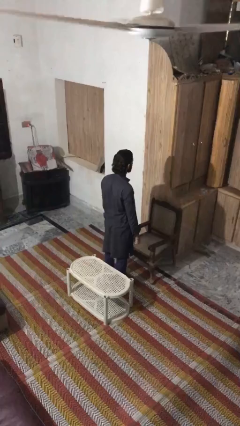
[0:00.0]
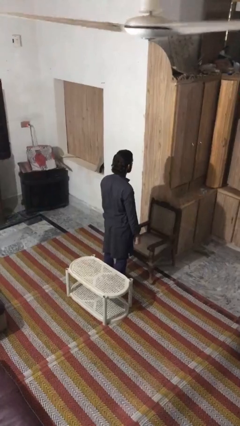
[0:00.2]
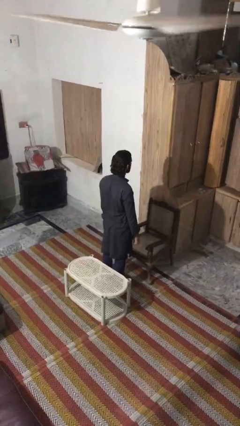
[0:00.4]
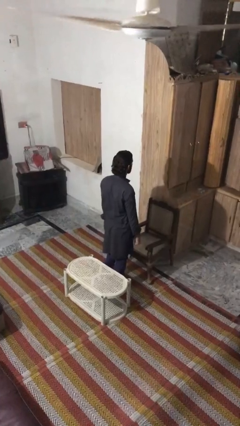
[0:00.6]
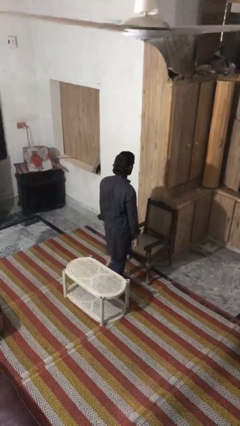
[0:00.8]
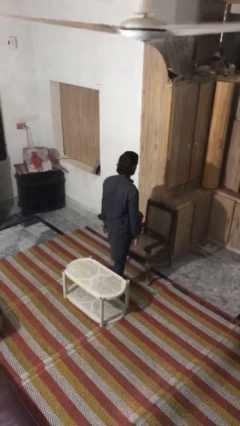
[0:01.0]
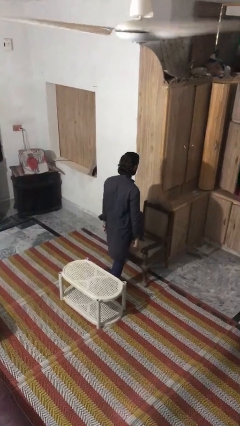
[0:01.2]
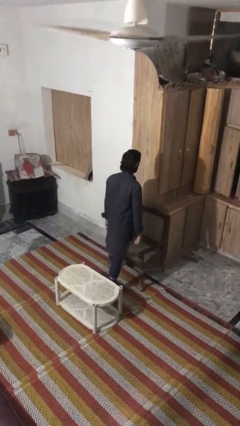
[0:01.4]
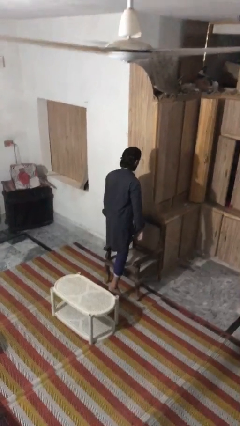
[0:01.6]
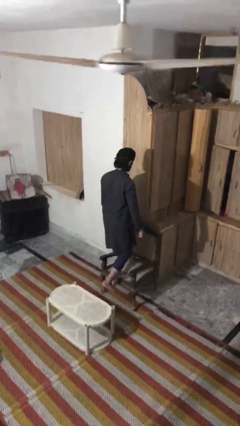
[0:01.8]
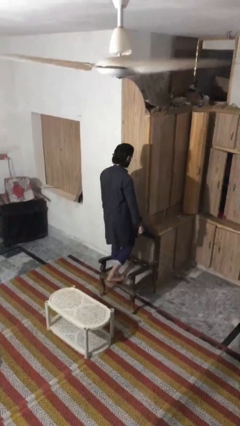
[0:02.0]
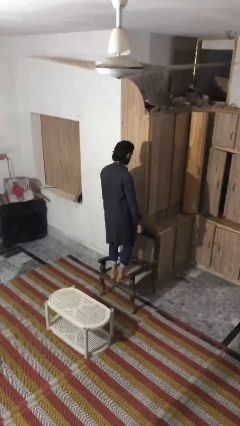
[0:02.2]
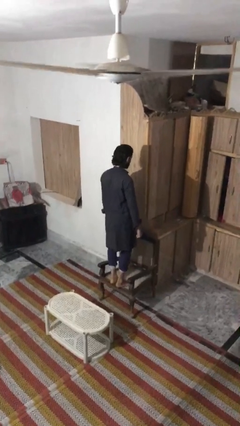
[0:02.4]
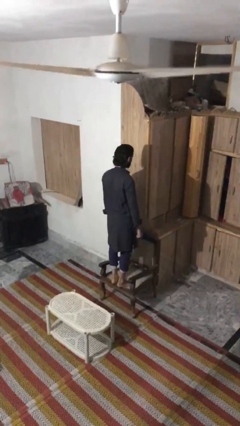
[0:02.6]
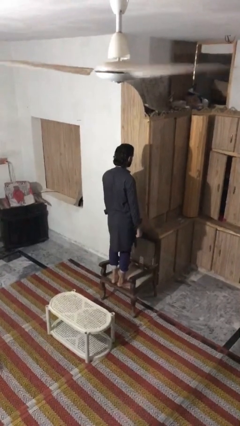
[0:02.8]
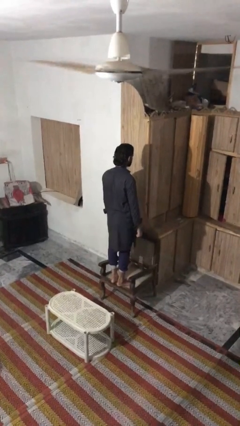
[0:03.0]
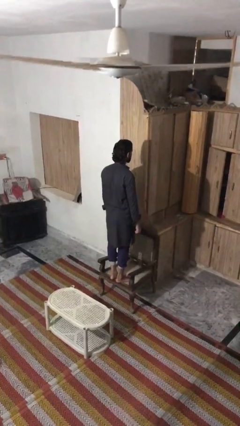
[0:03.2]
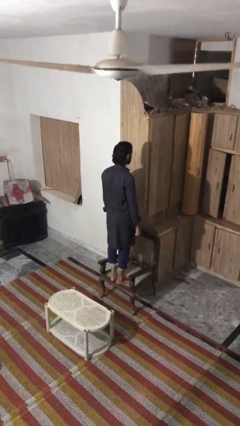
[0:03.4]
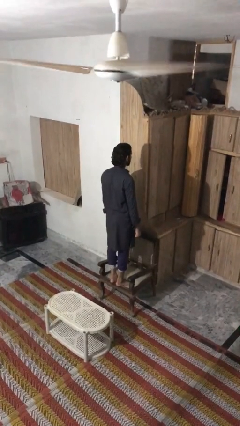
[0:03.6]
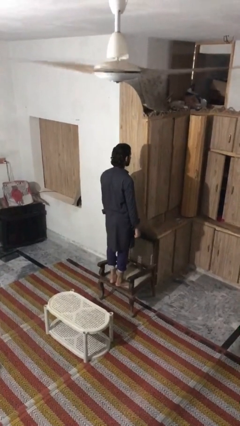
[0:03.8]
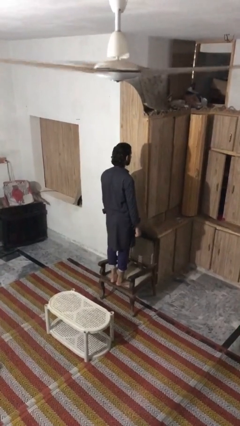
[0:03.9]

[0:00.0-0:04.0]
person climbs on chair

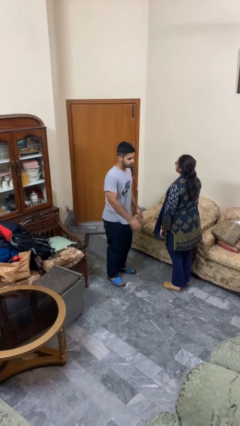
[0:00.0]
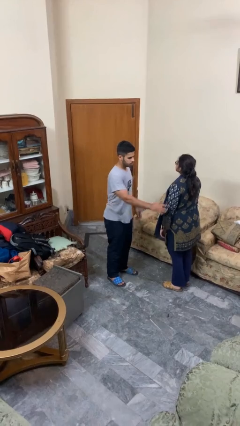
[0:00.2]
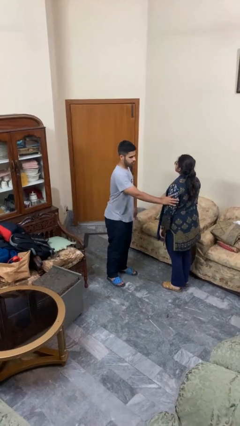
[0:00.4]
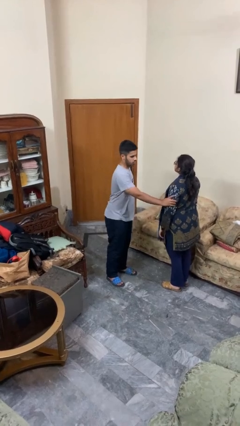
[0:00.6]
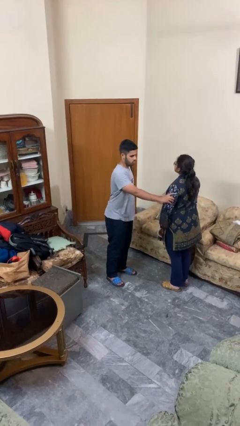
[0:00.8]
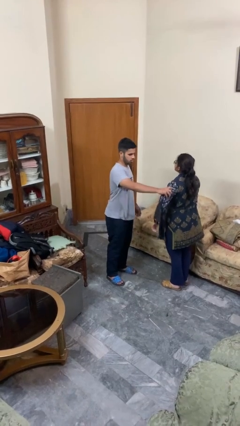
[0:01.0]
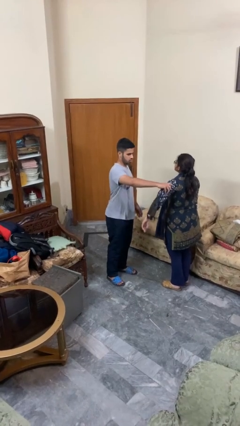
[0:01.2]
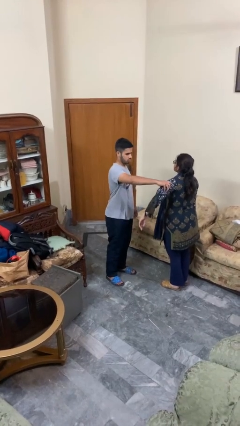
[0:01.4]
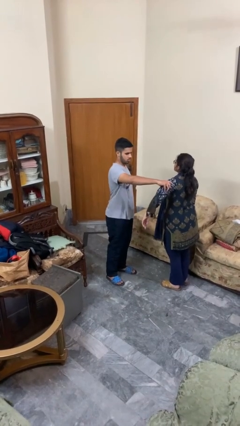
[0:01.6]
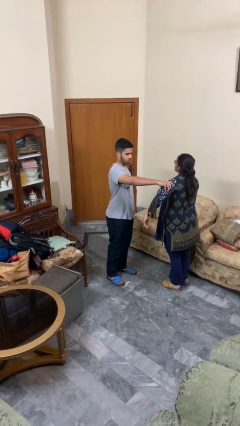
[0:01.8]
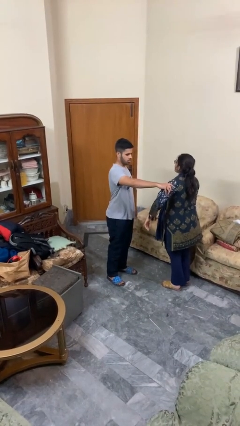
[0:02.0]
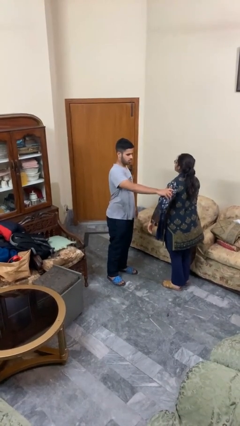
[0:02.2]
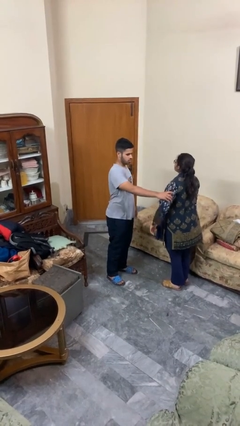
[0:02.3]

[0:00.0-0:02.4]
person grabs person by bicep

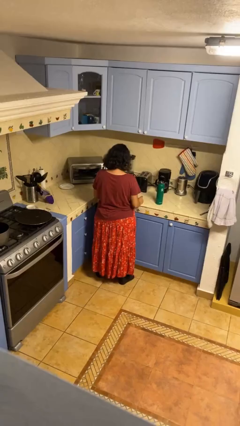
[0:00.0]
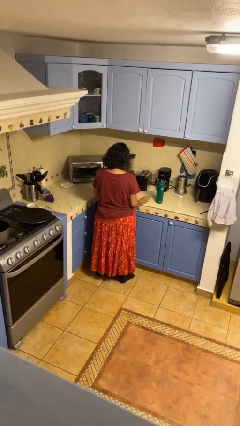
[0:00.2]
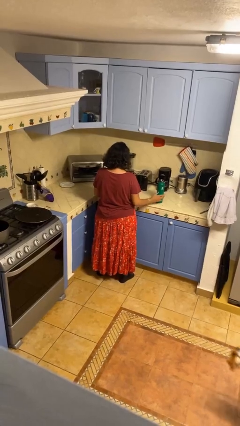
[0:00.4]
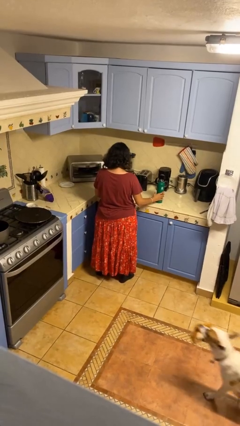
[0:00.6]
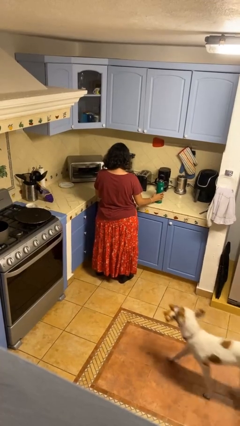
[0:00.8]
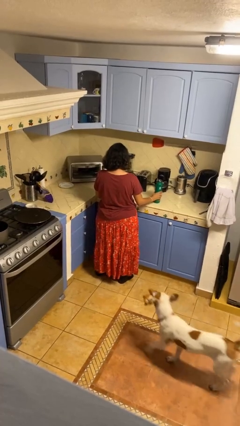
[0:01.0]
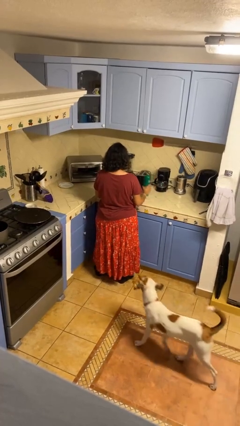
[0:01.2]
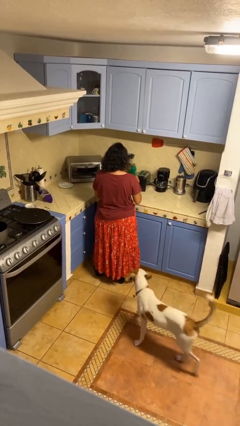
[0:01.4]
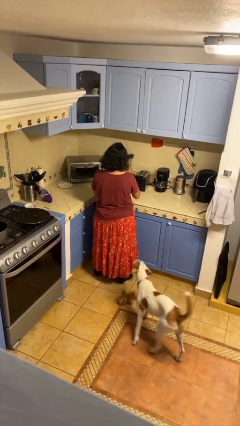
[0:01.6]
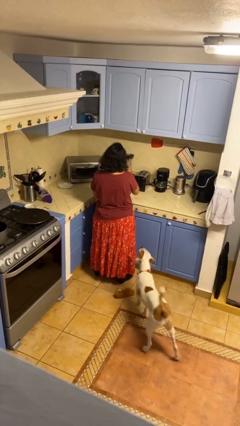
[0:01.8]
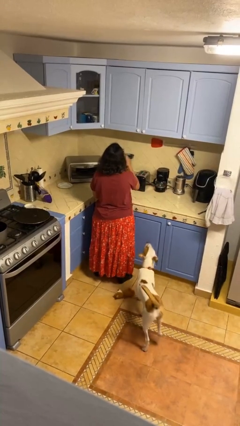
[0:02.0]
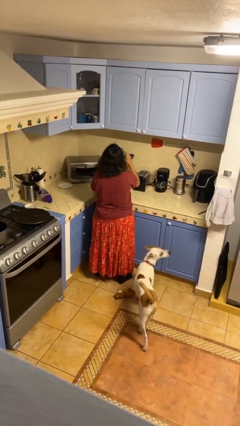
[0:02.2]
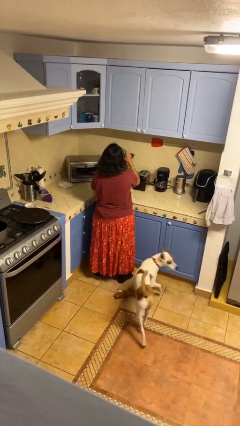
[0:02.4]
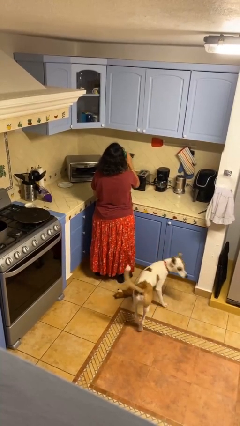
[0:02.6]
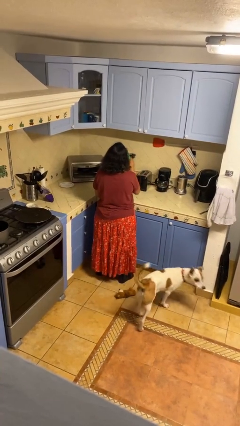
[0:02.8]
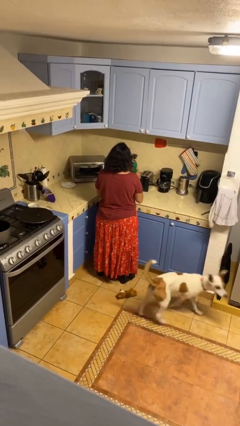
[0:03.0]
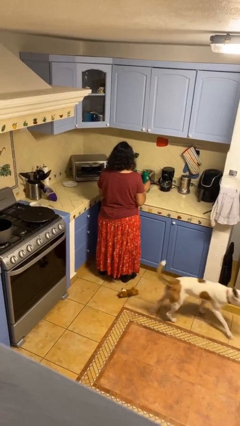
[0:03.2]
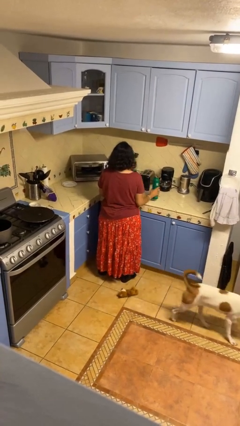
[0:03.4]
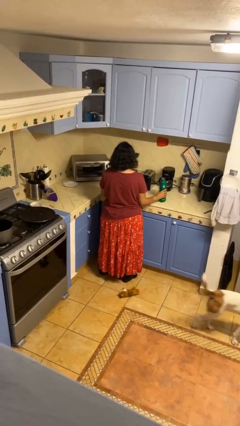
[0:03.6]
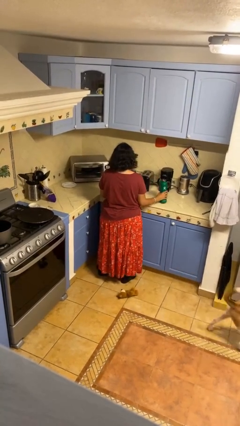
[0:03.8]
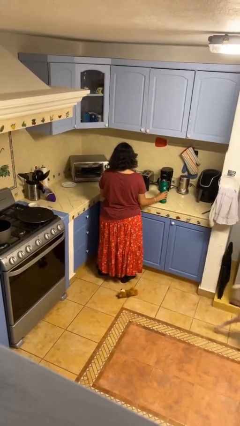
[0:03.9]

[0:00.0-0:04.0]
person drinks from bottle

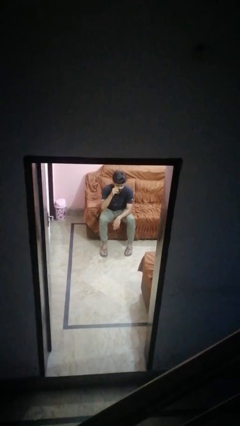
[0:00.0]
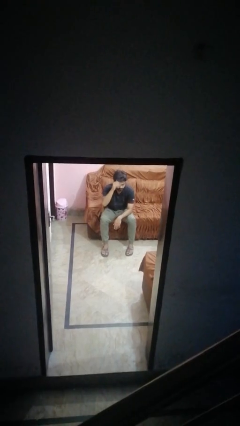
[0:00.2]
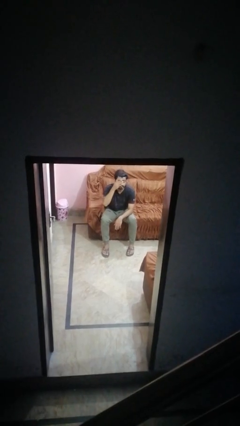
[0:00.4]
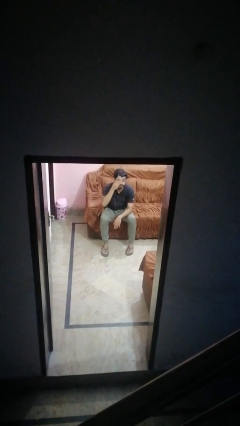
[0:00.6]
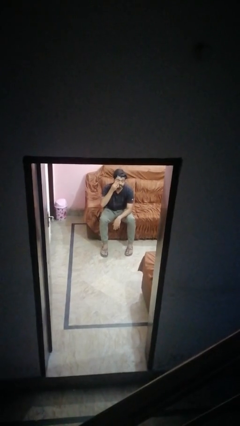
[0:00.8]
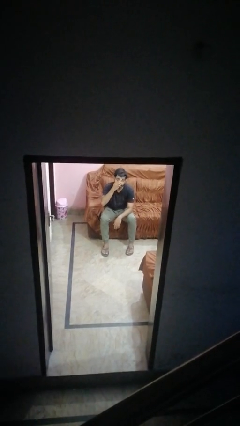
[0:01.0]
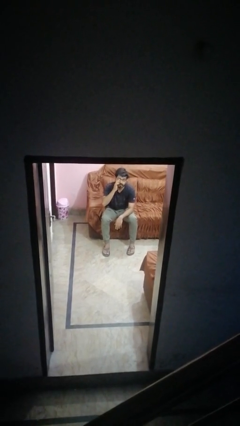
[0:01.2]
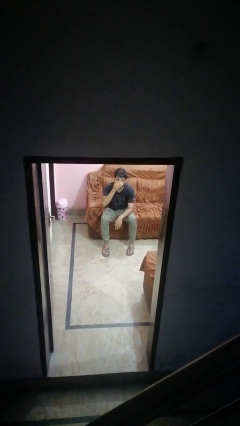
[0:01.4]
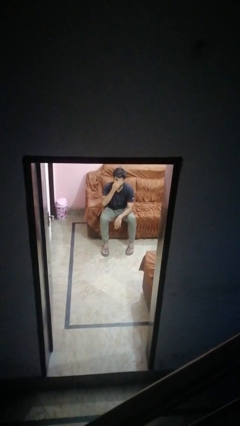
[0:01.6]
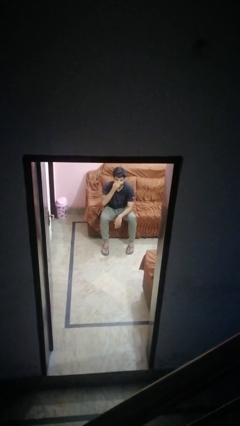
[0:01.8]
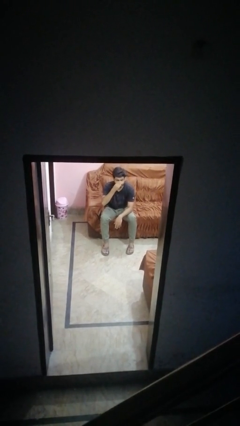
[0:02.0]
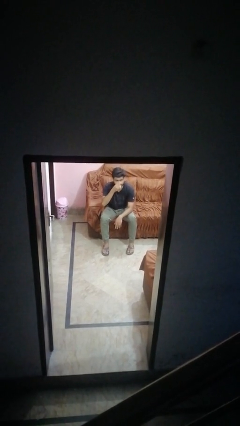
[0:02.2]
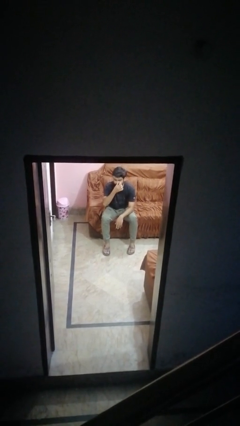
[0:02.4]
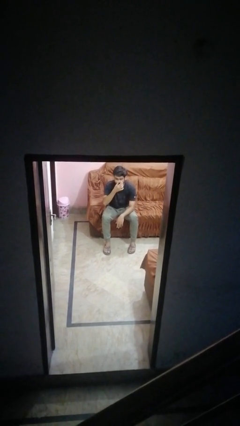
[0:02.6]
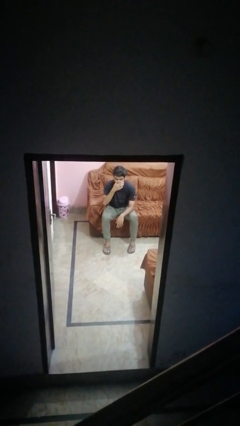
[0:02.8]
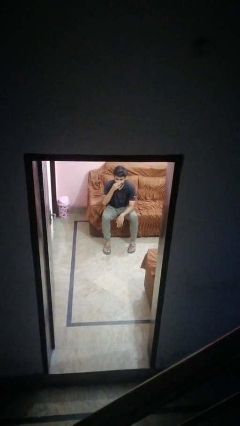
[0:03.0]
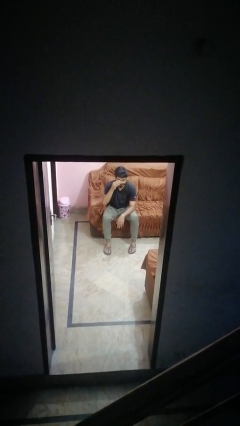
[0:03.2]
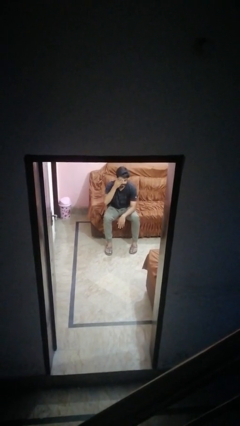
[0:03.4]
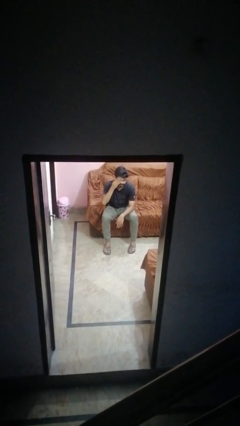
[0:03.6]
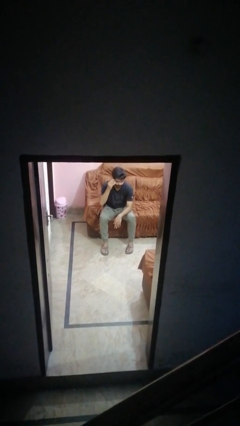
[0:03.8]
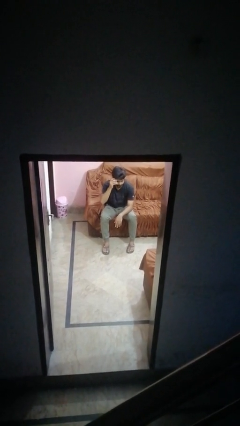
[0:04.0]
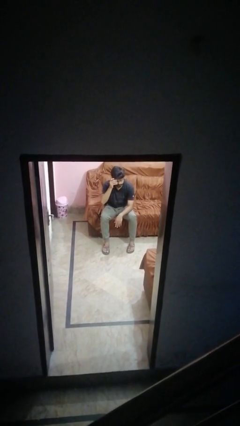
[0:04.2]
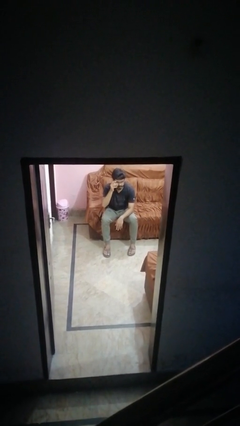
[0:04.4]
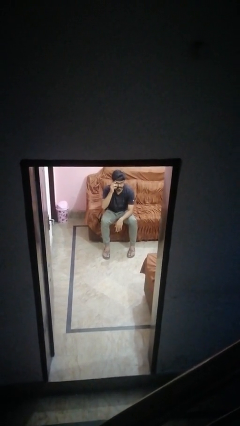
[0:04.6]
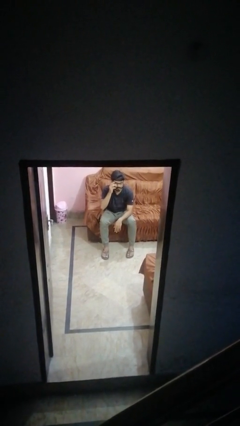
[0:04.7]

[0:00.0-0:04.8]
person scratches face

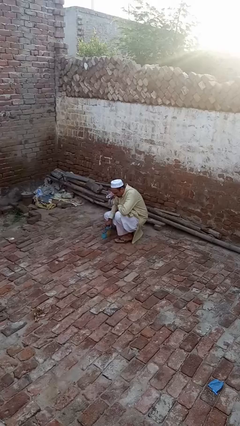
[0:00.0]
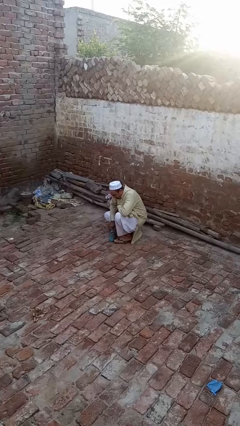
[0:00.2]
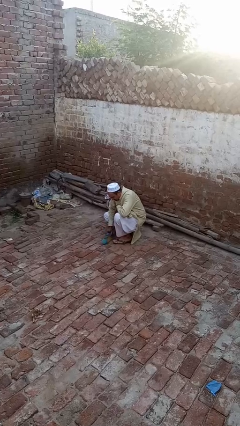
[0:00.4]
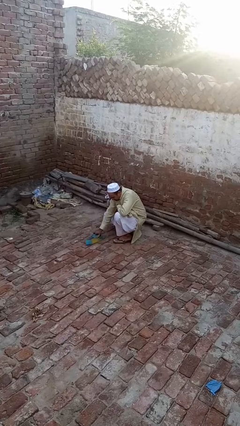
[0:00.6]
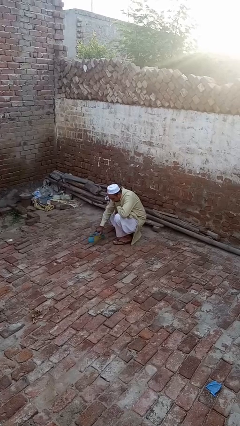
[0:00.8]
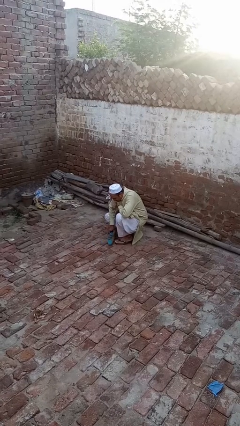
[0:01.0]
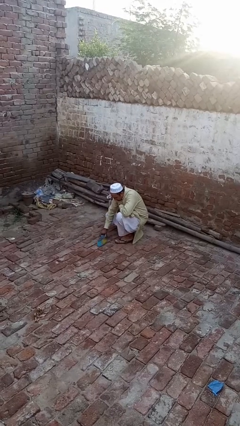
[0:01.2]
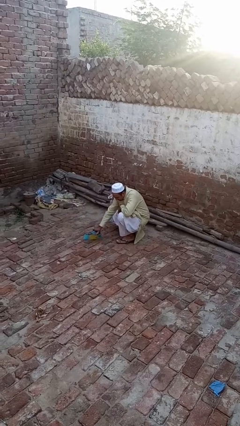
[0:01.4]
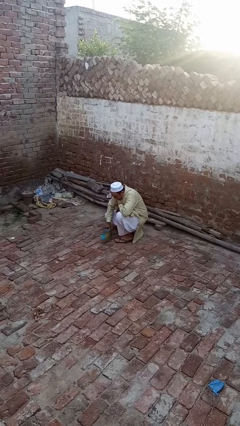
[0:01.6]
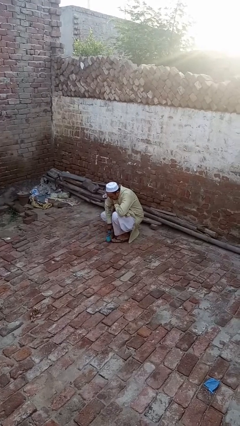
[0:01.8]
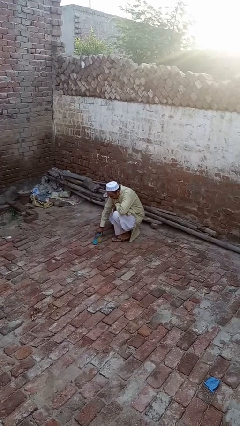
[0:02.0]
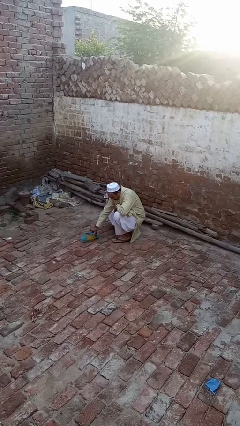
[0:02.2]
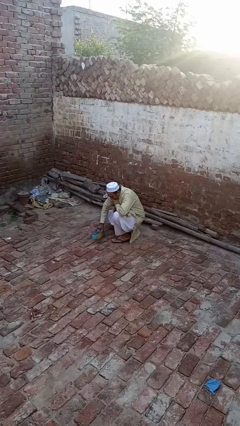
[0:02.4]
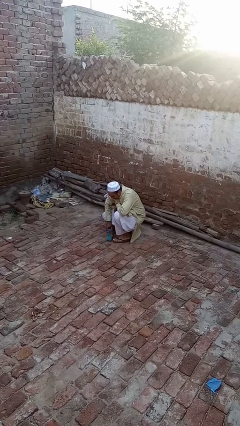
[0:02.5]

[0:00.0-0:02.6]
person mops
